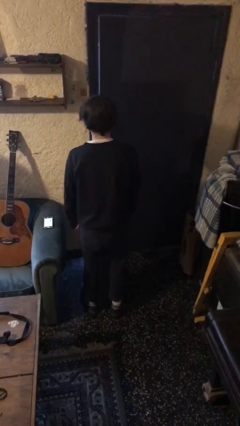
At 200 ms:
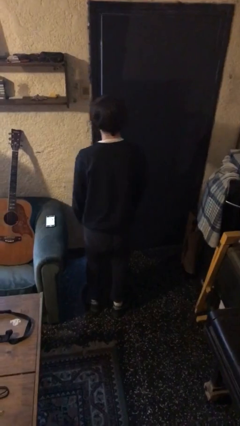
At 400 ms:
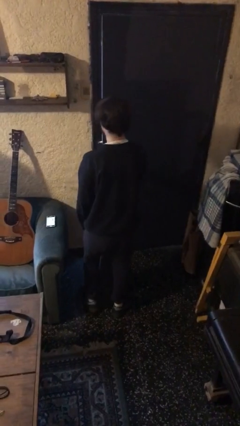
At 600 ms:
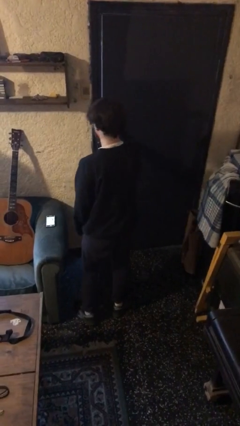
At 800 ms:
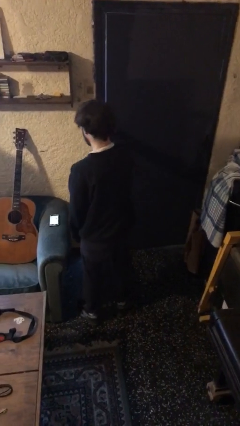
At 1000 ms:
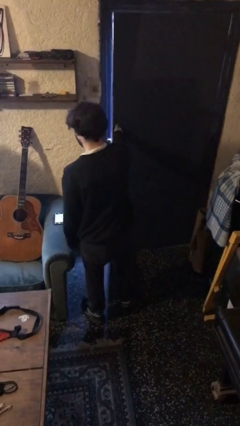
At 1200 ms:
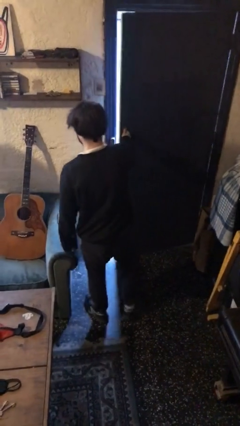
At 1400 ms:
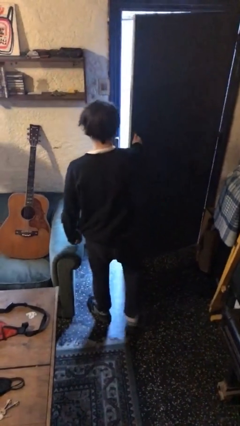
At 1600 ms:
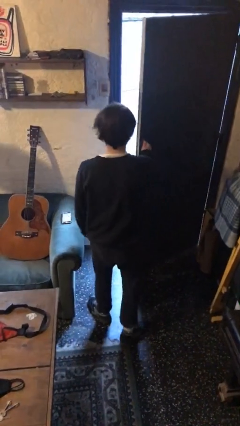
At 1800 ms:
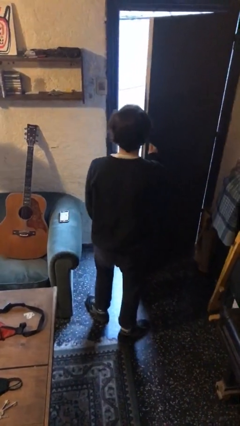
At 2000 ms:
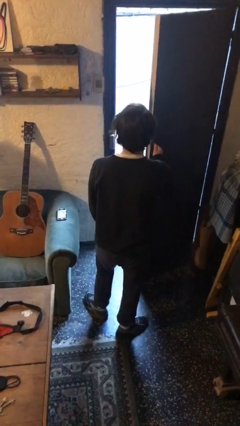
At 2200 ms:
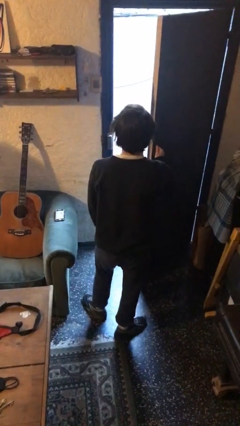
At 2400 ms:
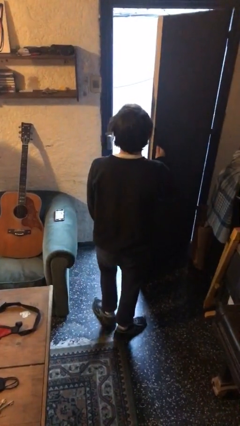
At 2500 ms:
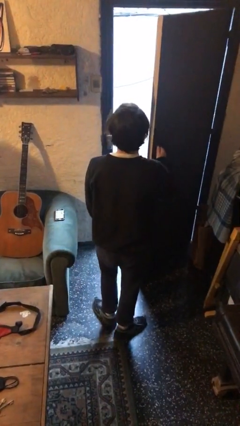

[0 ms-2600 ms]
person opens facility door

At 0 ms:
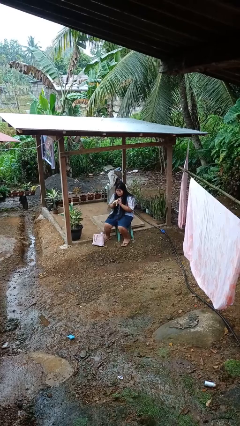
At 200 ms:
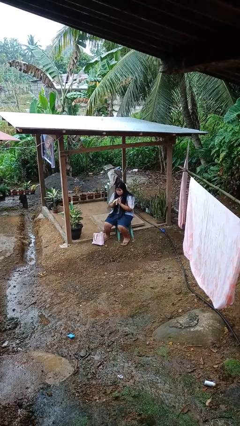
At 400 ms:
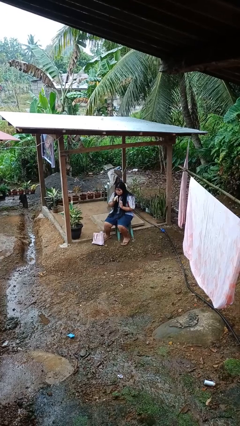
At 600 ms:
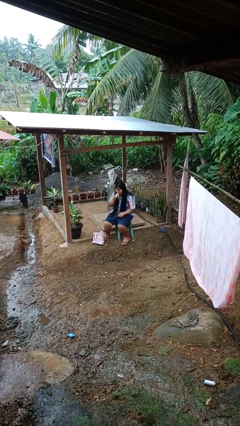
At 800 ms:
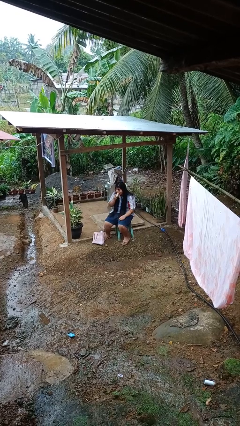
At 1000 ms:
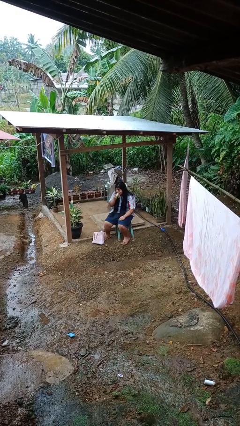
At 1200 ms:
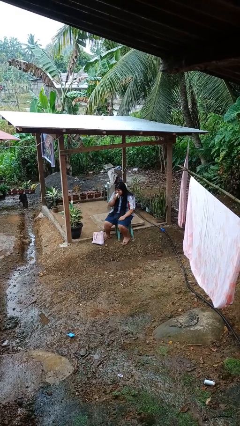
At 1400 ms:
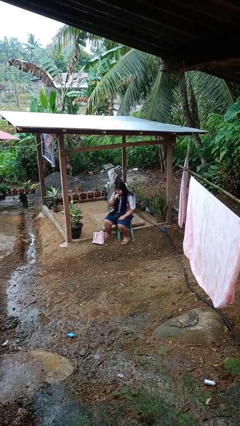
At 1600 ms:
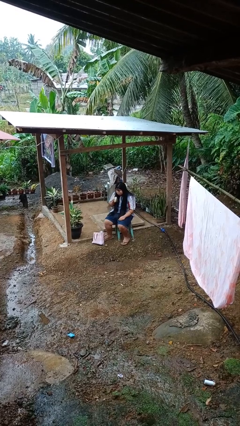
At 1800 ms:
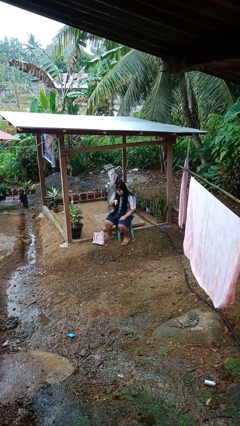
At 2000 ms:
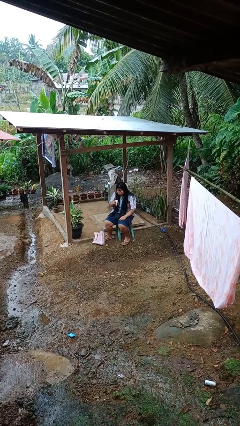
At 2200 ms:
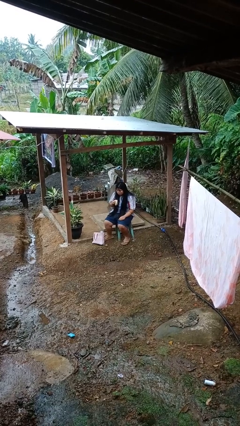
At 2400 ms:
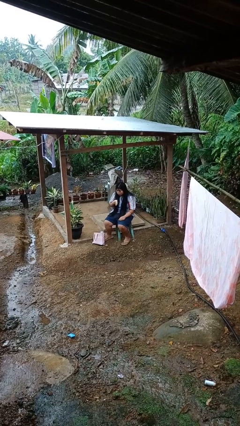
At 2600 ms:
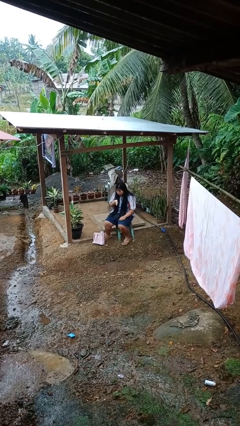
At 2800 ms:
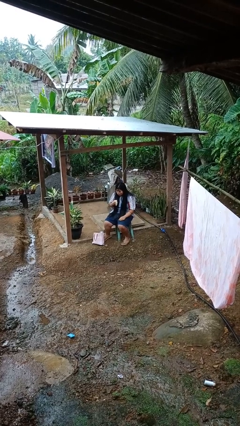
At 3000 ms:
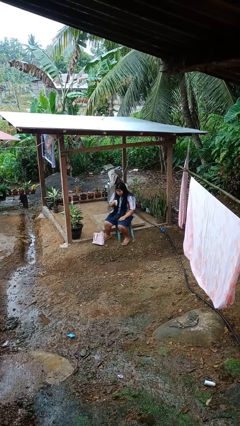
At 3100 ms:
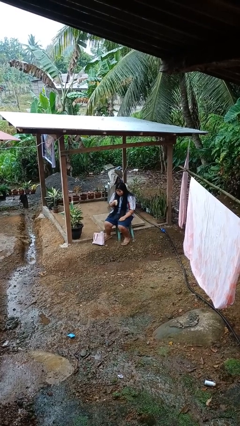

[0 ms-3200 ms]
person eats banana

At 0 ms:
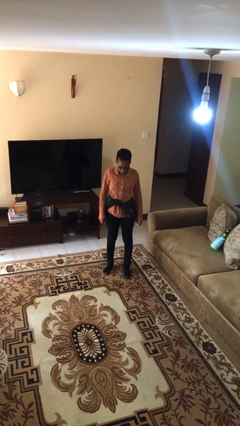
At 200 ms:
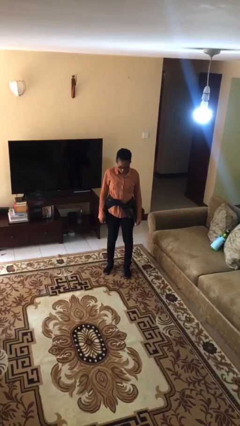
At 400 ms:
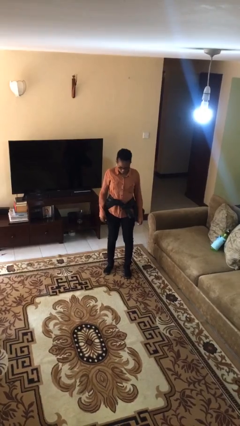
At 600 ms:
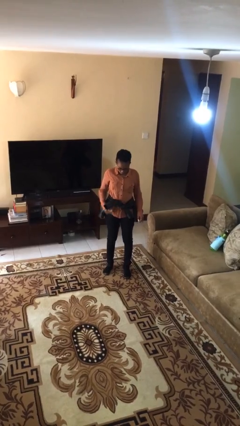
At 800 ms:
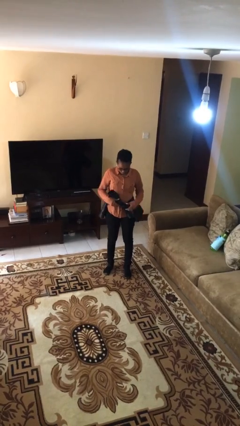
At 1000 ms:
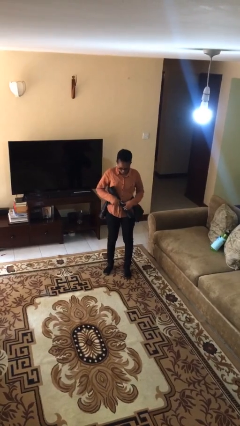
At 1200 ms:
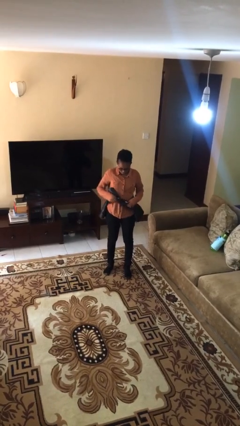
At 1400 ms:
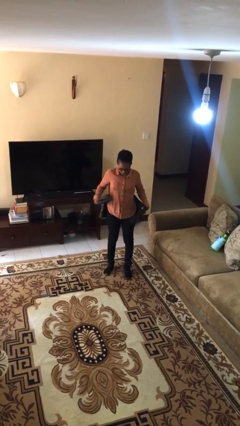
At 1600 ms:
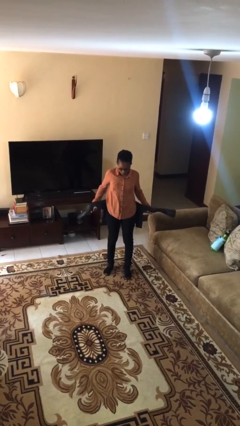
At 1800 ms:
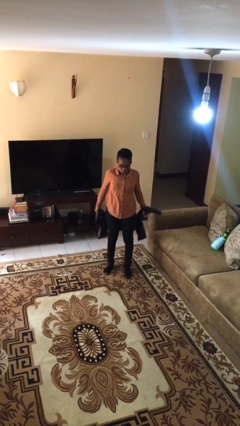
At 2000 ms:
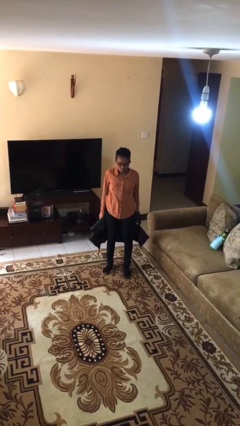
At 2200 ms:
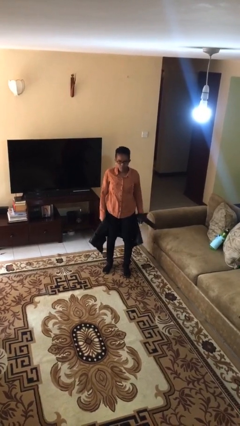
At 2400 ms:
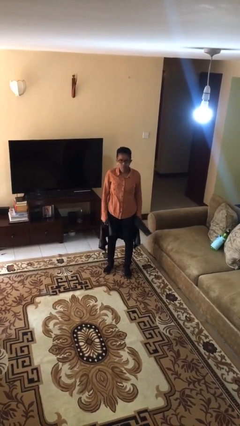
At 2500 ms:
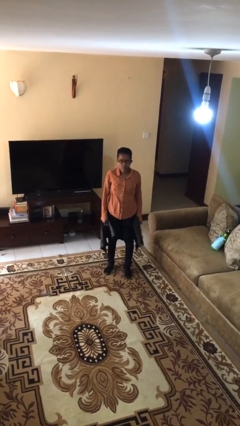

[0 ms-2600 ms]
person unties jacket around waist

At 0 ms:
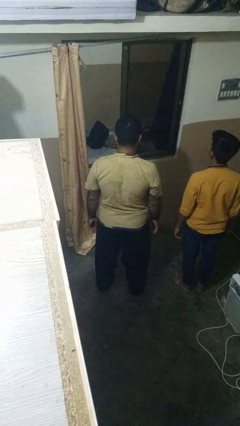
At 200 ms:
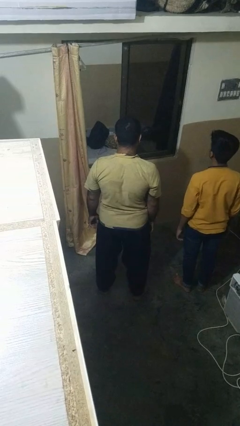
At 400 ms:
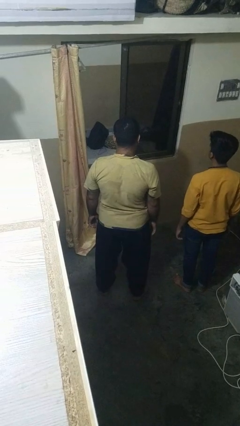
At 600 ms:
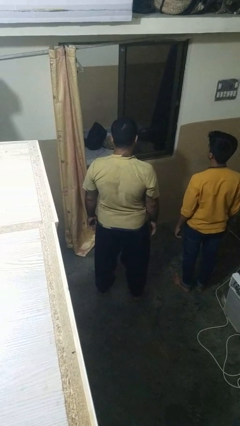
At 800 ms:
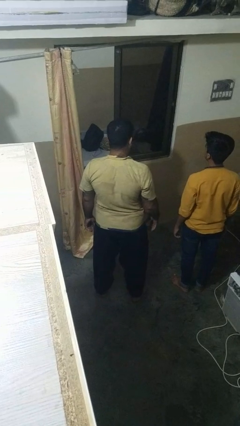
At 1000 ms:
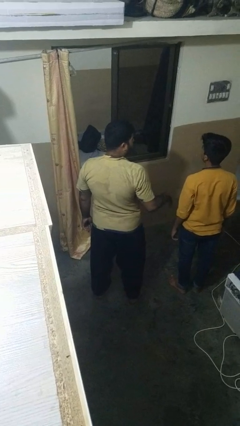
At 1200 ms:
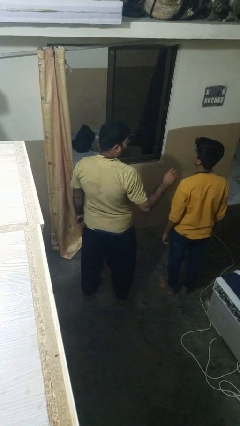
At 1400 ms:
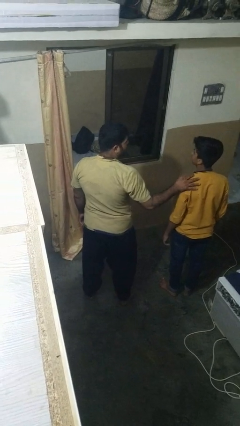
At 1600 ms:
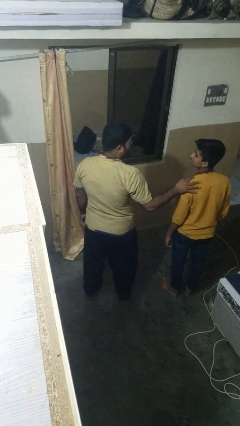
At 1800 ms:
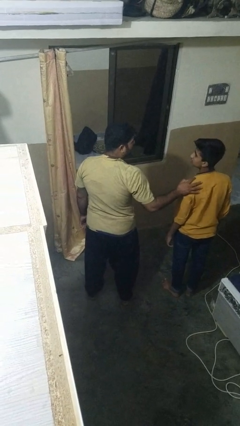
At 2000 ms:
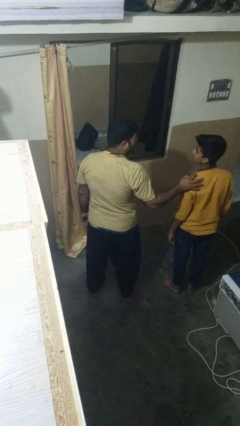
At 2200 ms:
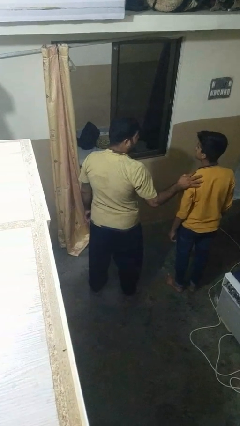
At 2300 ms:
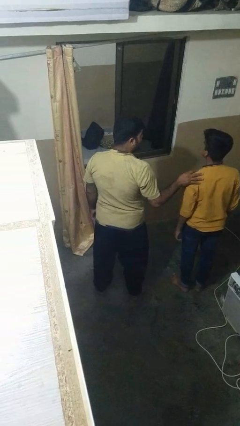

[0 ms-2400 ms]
person pounds shoulders of person

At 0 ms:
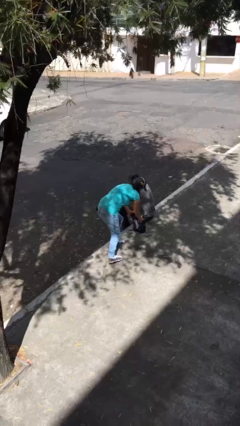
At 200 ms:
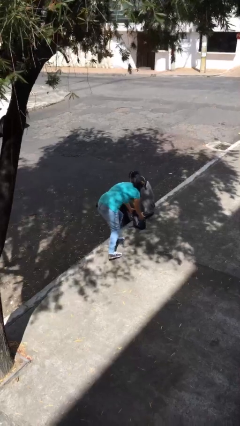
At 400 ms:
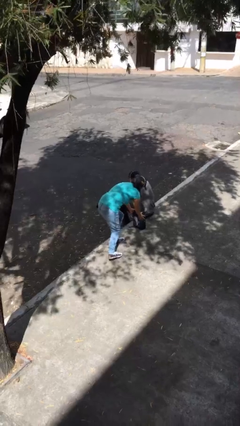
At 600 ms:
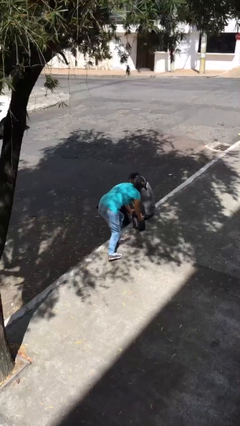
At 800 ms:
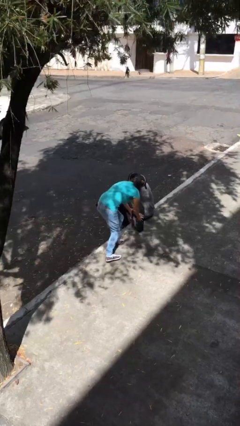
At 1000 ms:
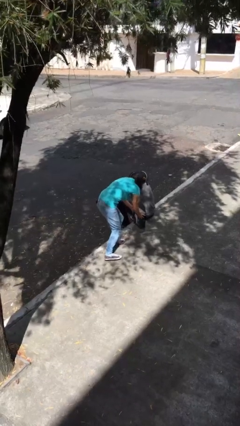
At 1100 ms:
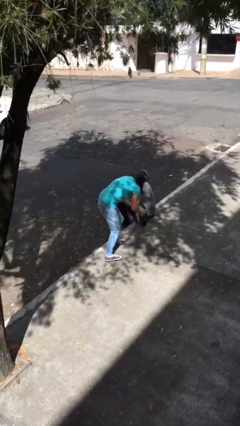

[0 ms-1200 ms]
person steals object from person

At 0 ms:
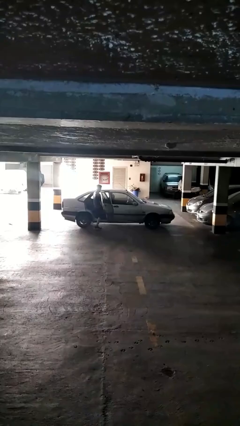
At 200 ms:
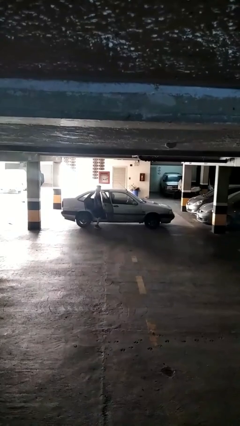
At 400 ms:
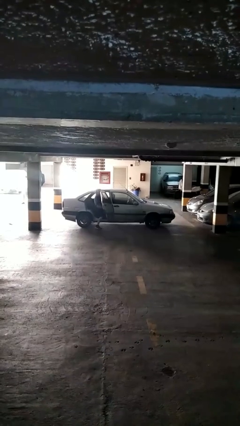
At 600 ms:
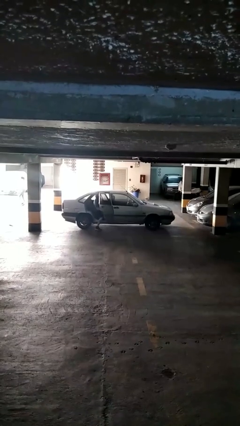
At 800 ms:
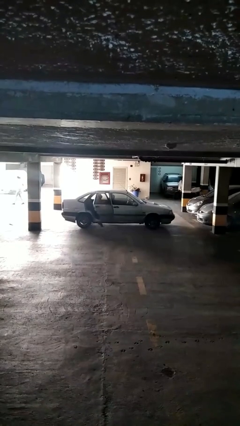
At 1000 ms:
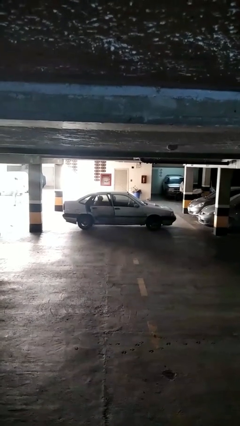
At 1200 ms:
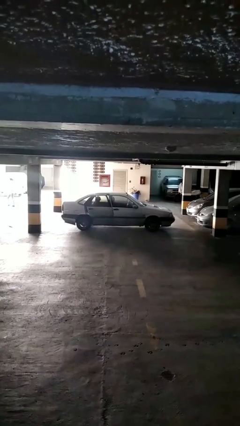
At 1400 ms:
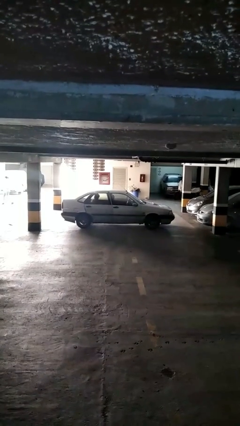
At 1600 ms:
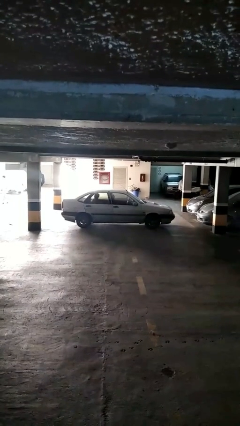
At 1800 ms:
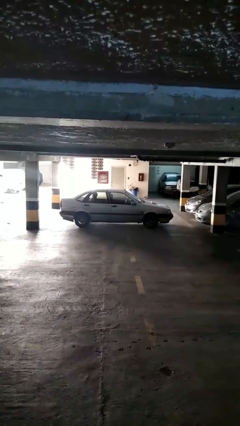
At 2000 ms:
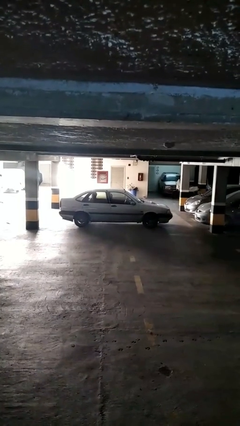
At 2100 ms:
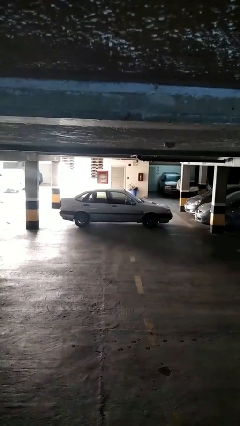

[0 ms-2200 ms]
car picks up person

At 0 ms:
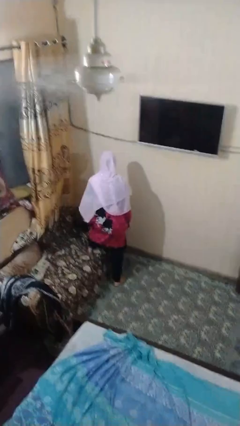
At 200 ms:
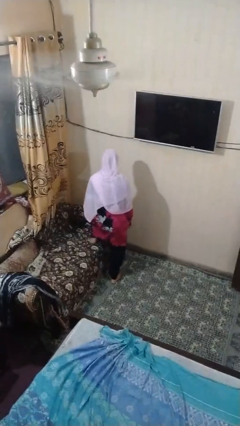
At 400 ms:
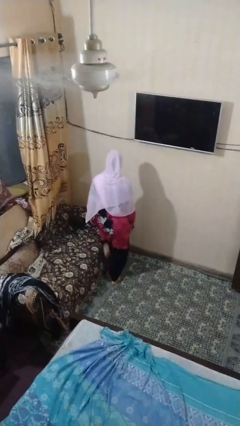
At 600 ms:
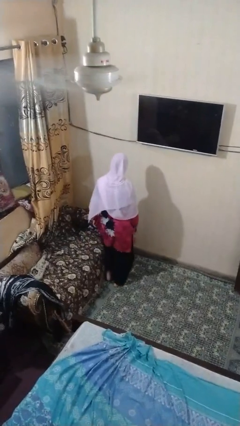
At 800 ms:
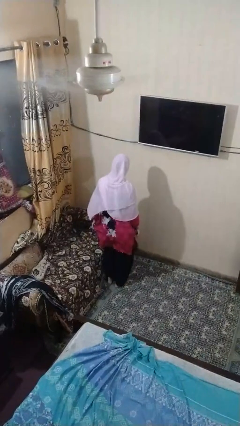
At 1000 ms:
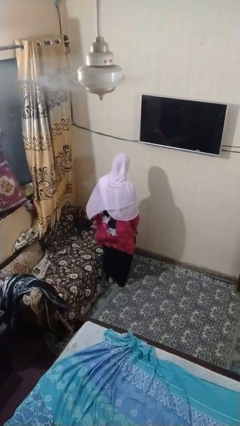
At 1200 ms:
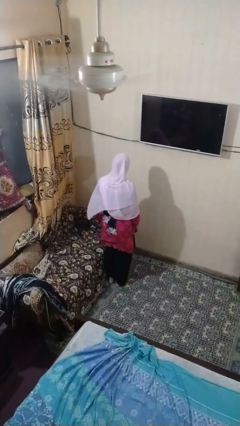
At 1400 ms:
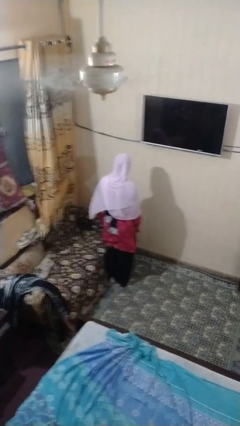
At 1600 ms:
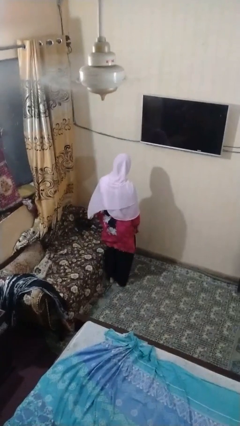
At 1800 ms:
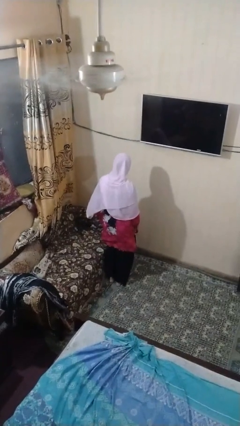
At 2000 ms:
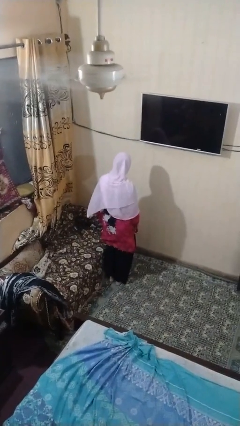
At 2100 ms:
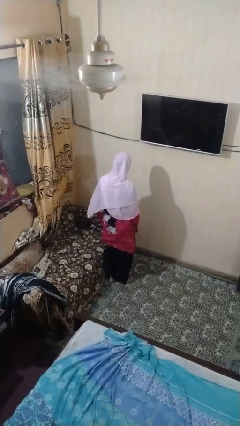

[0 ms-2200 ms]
person climbs off couch
